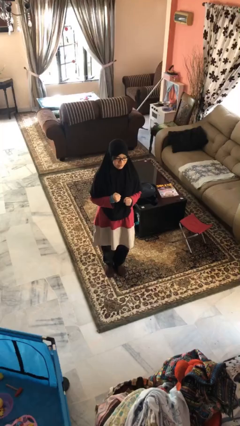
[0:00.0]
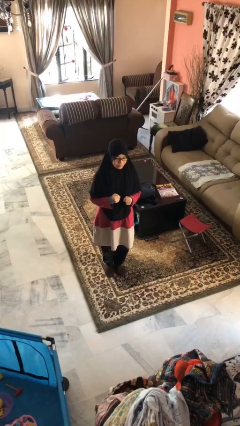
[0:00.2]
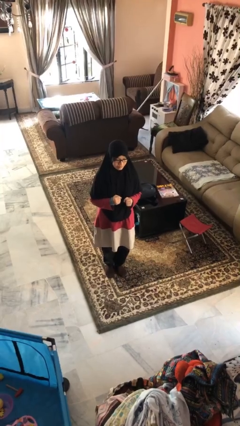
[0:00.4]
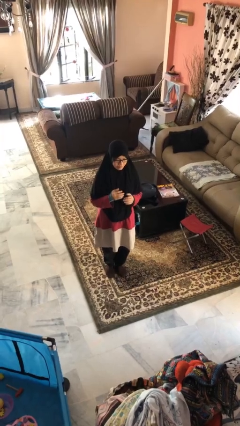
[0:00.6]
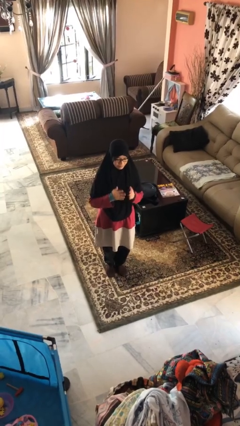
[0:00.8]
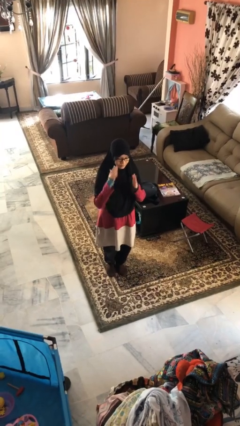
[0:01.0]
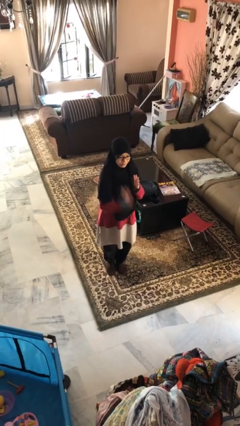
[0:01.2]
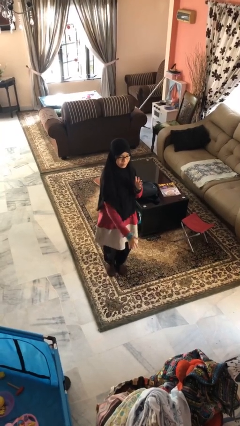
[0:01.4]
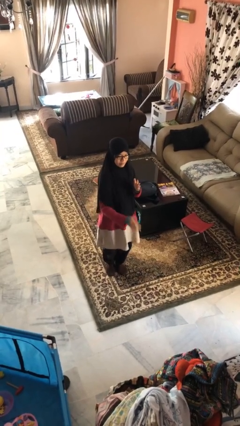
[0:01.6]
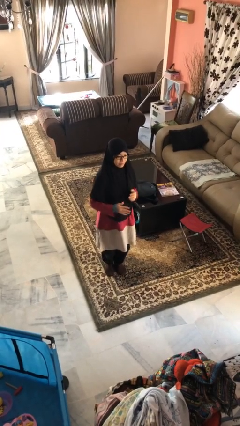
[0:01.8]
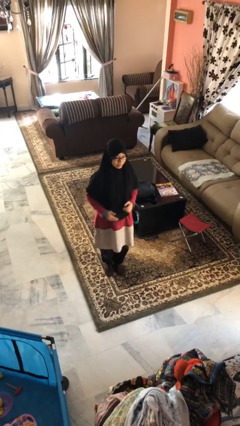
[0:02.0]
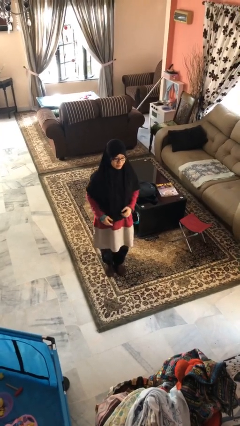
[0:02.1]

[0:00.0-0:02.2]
person karate chop

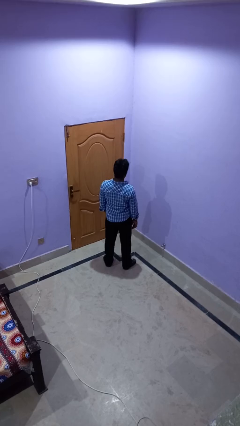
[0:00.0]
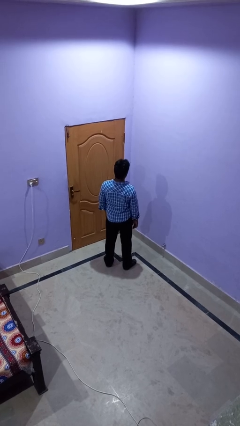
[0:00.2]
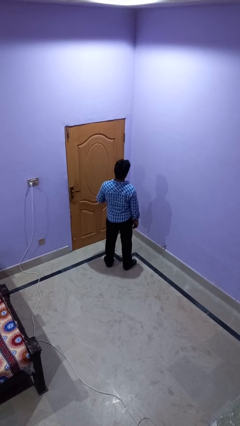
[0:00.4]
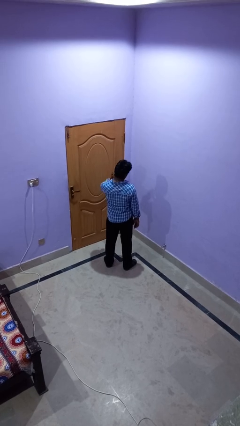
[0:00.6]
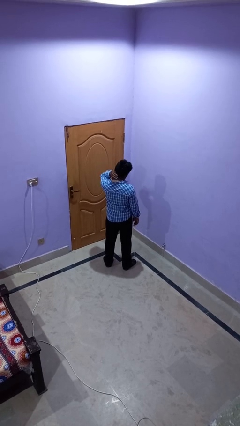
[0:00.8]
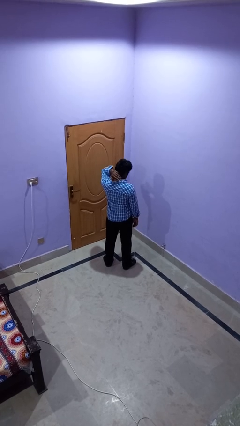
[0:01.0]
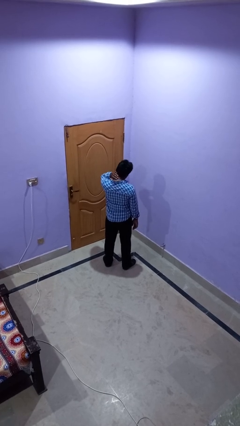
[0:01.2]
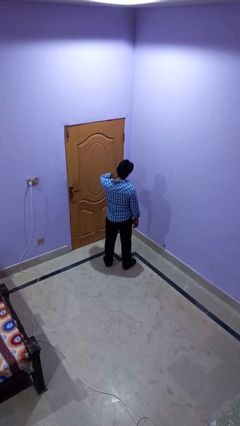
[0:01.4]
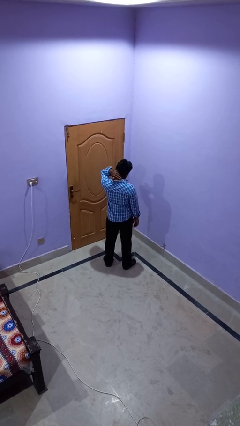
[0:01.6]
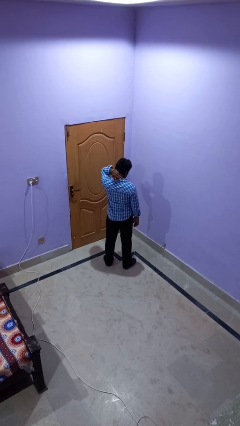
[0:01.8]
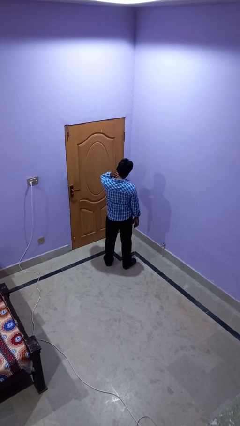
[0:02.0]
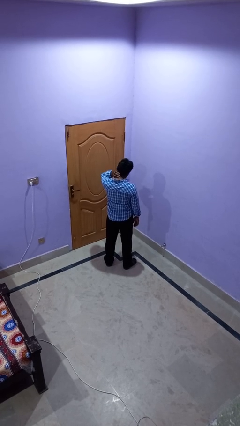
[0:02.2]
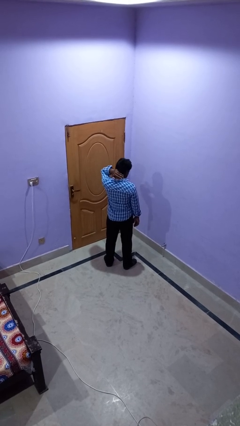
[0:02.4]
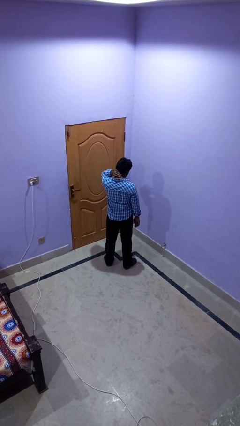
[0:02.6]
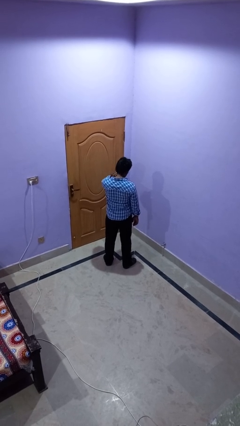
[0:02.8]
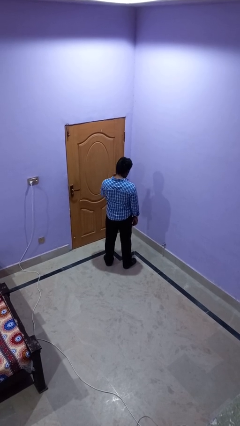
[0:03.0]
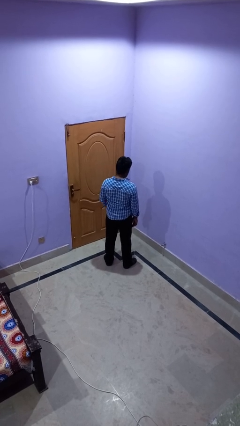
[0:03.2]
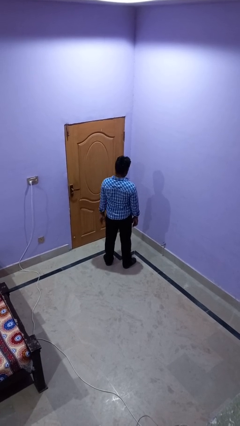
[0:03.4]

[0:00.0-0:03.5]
person rubs neck

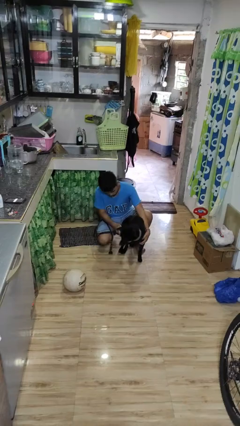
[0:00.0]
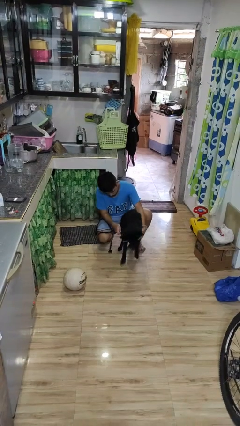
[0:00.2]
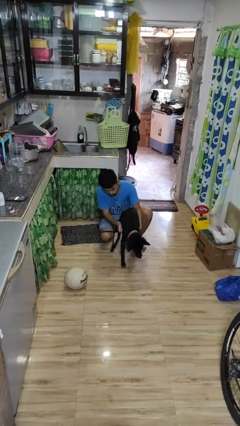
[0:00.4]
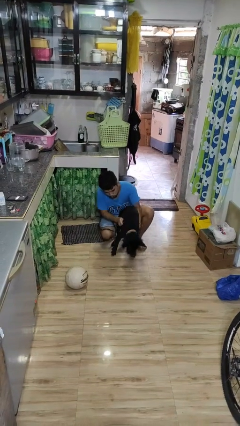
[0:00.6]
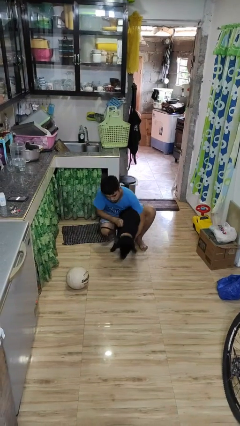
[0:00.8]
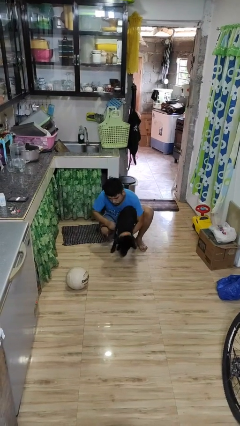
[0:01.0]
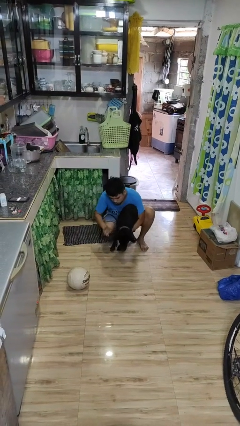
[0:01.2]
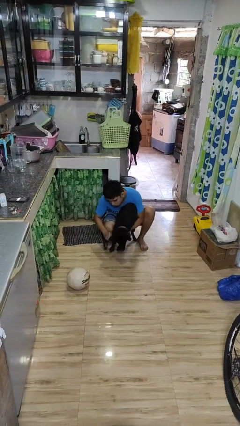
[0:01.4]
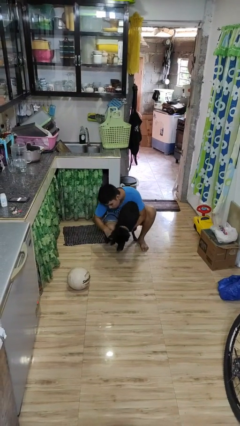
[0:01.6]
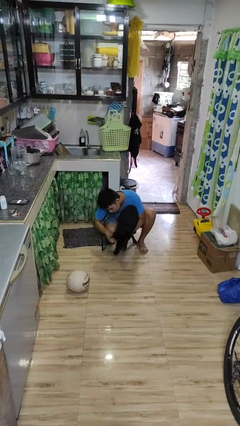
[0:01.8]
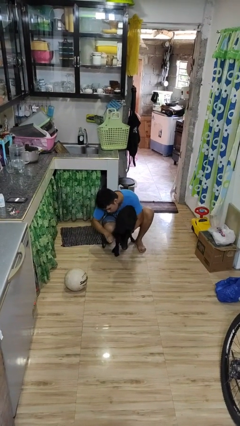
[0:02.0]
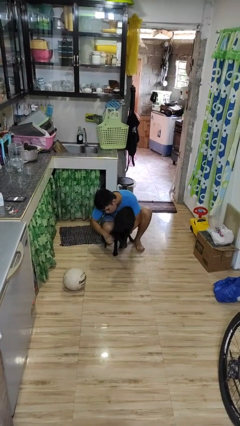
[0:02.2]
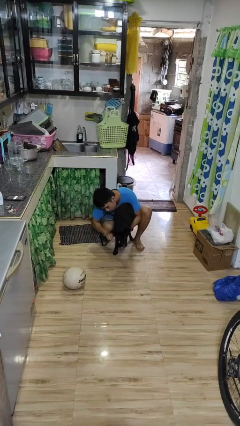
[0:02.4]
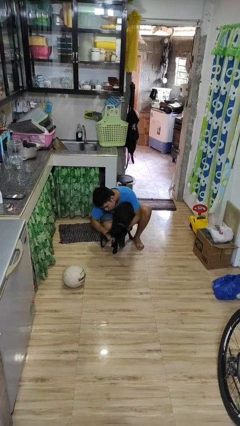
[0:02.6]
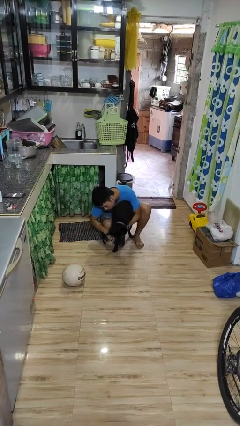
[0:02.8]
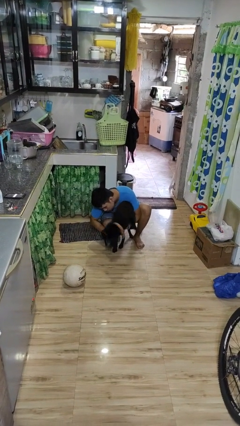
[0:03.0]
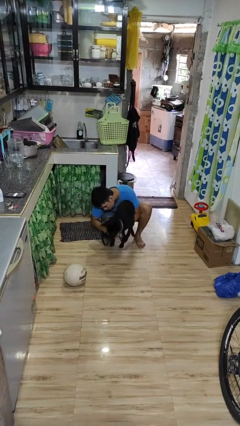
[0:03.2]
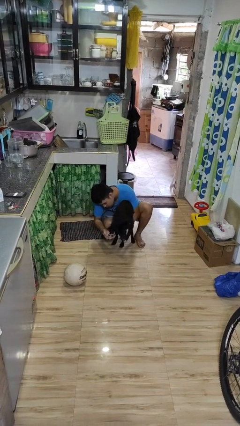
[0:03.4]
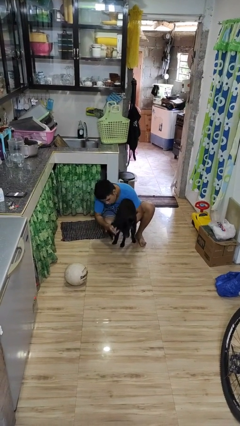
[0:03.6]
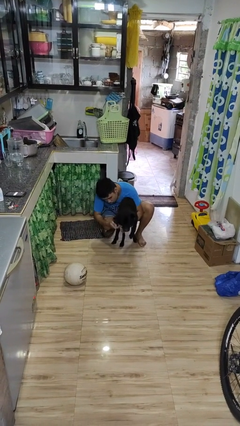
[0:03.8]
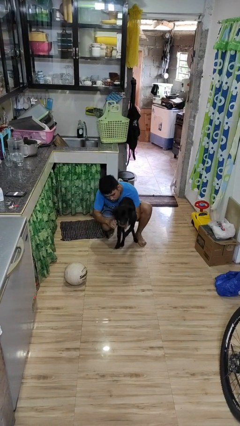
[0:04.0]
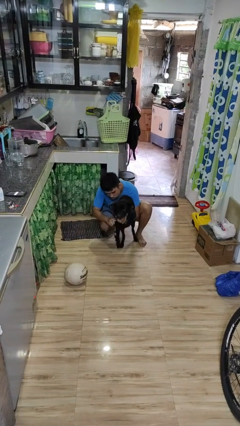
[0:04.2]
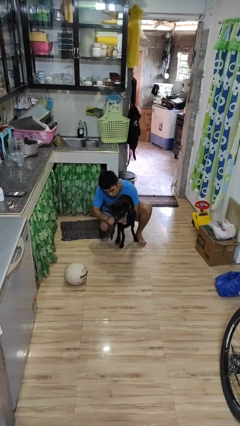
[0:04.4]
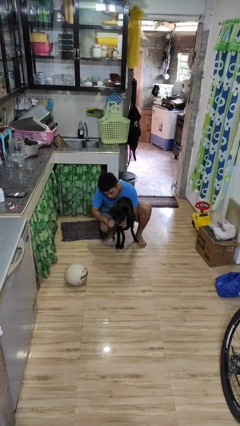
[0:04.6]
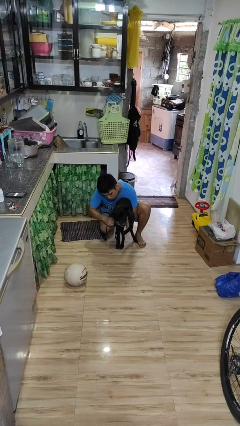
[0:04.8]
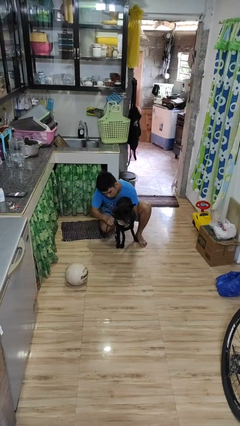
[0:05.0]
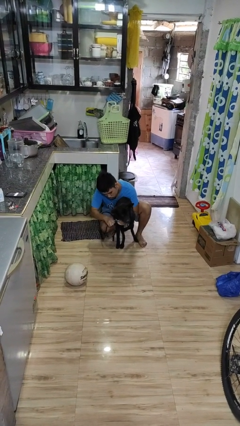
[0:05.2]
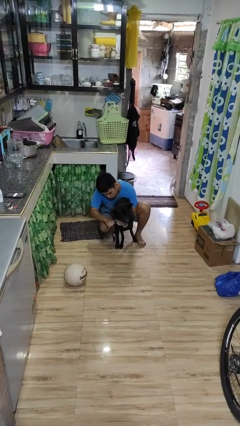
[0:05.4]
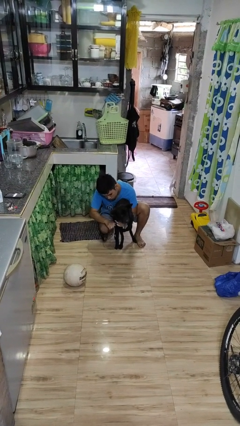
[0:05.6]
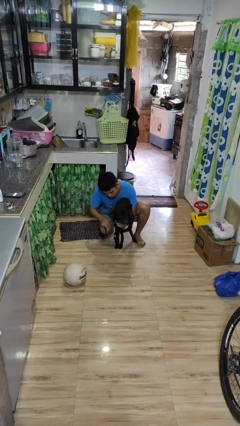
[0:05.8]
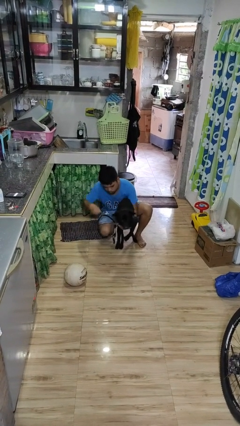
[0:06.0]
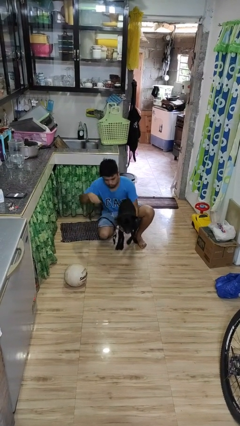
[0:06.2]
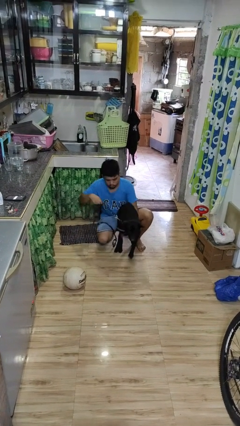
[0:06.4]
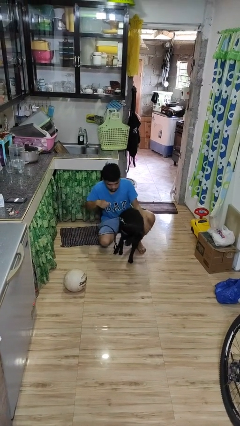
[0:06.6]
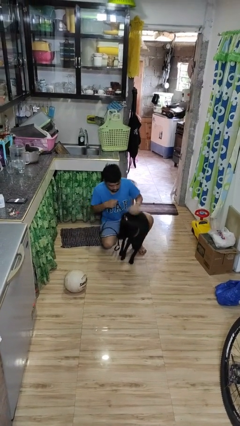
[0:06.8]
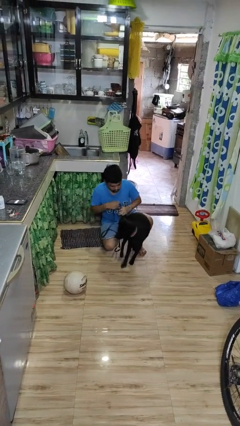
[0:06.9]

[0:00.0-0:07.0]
person attaches leash to dog

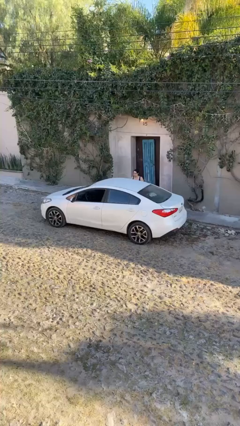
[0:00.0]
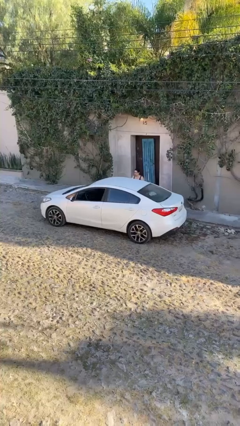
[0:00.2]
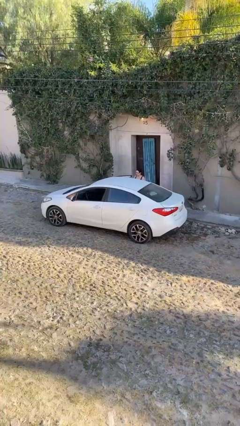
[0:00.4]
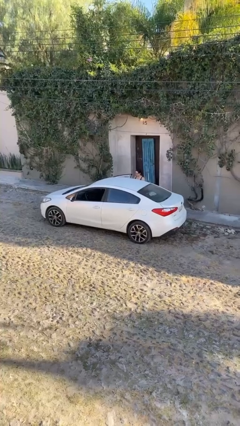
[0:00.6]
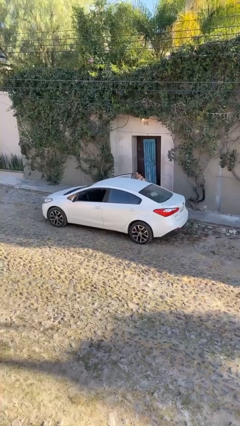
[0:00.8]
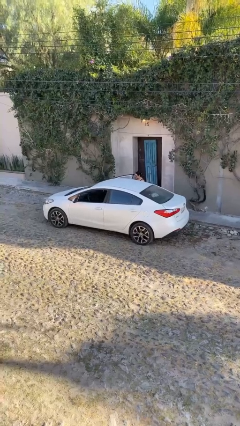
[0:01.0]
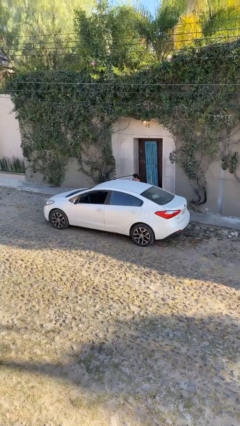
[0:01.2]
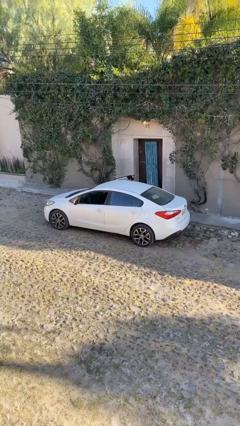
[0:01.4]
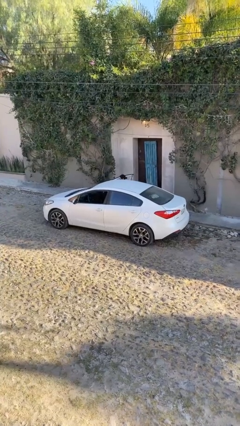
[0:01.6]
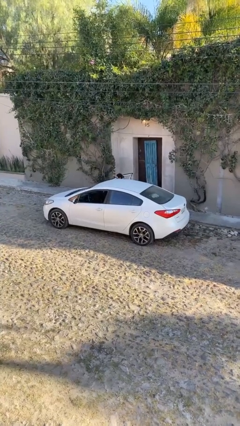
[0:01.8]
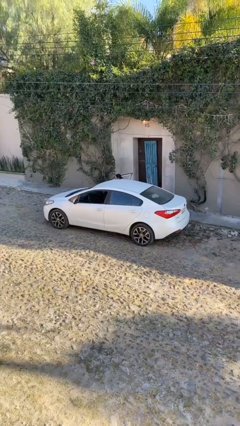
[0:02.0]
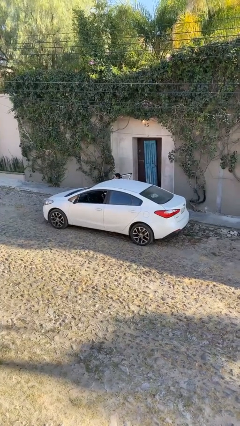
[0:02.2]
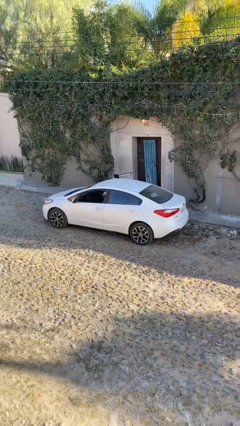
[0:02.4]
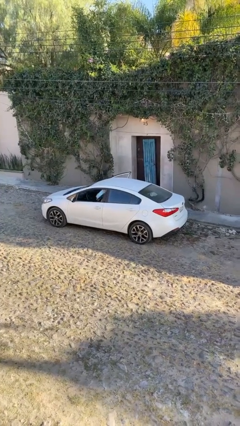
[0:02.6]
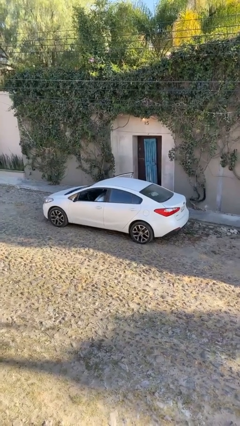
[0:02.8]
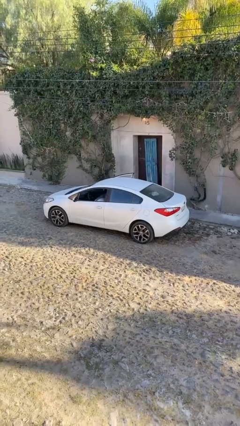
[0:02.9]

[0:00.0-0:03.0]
car picks up person

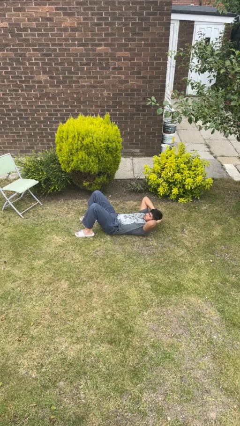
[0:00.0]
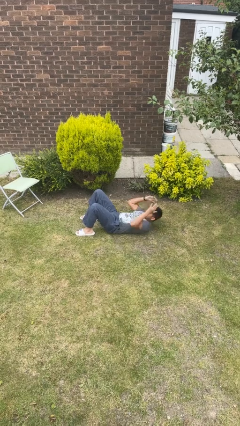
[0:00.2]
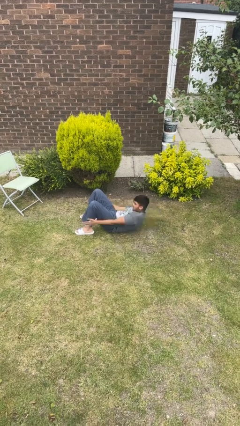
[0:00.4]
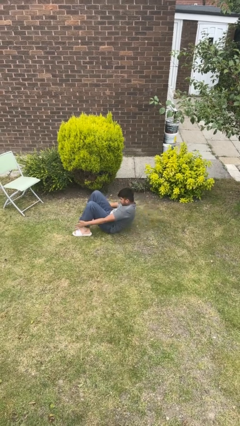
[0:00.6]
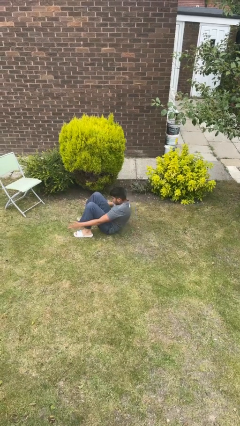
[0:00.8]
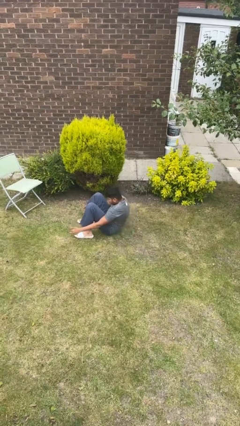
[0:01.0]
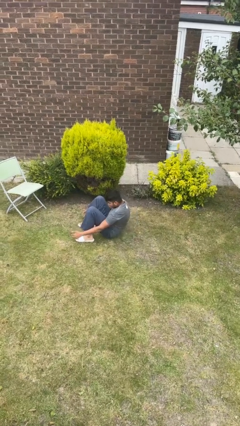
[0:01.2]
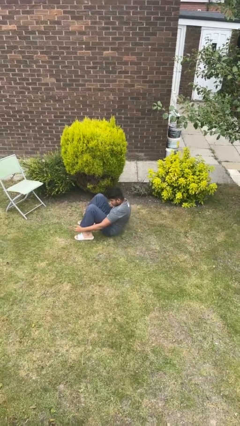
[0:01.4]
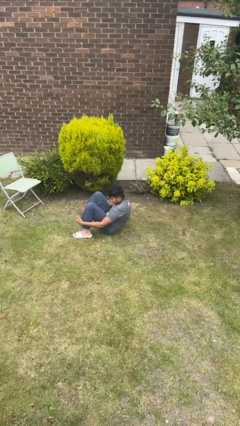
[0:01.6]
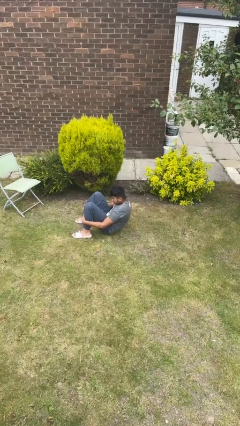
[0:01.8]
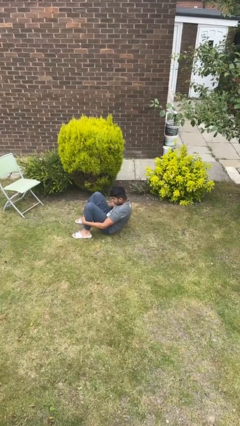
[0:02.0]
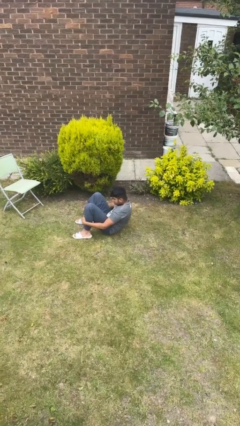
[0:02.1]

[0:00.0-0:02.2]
person exercises with situp
